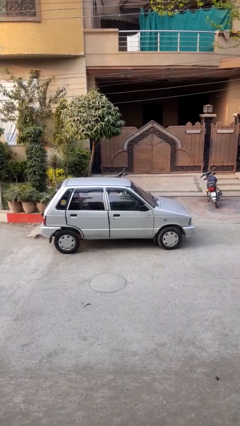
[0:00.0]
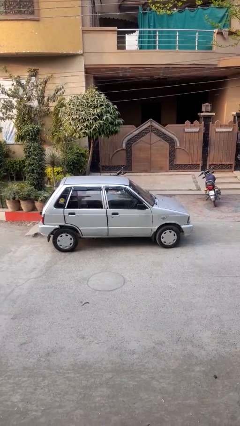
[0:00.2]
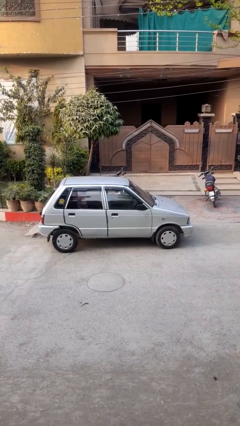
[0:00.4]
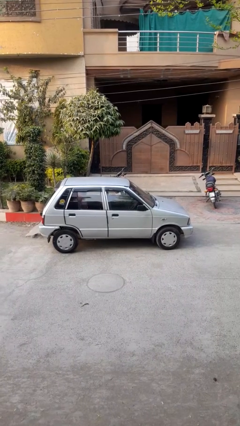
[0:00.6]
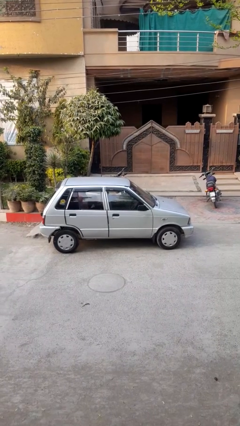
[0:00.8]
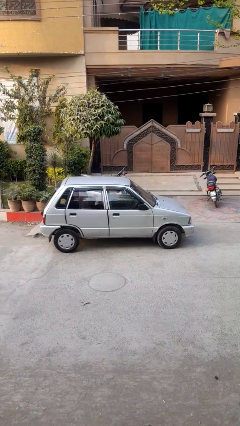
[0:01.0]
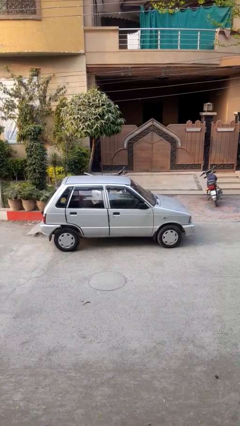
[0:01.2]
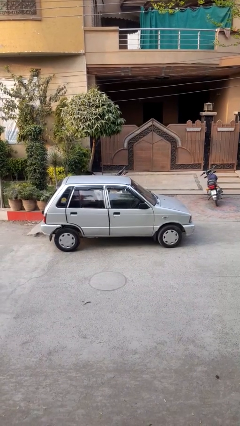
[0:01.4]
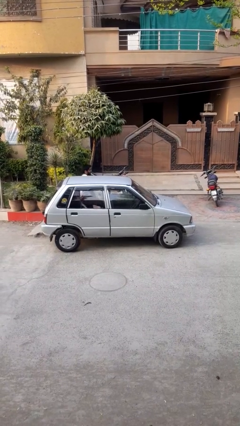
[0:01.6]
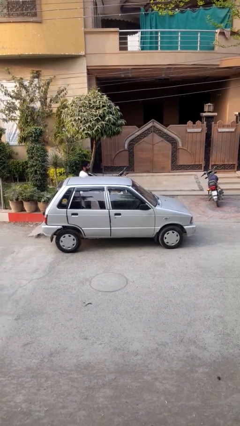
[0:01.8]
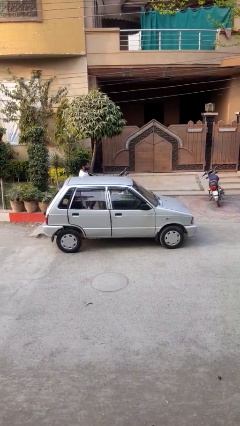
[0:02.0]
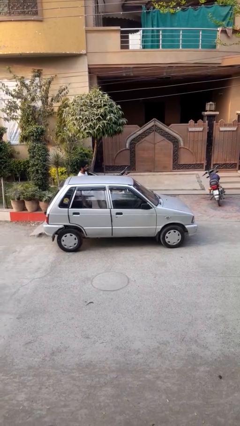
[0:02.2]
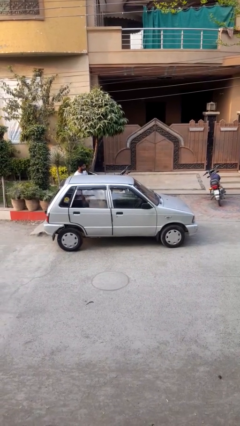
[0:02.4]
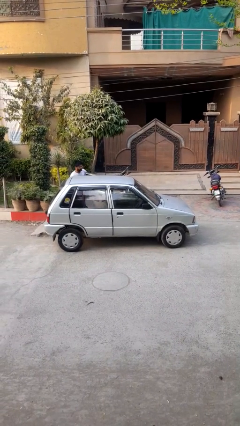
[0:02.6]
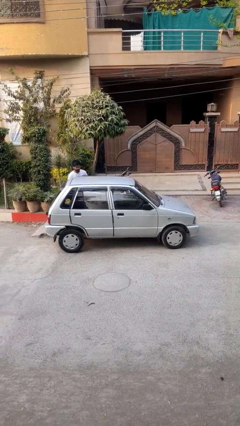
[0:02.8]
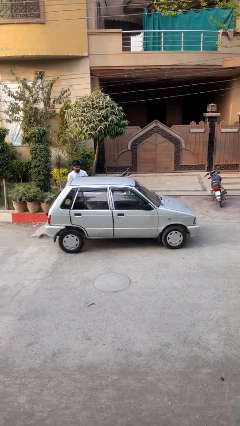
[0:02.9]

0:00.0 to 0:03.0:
car drops off person

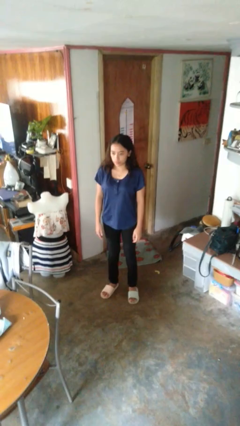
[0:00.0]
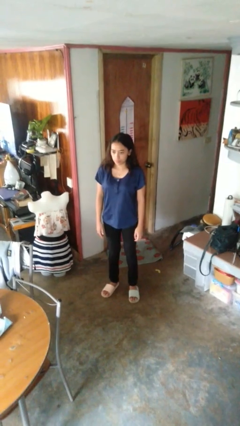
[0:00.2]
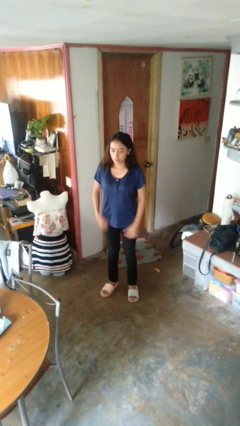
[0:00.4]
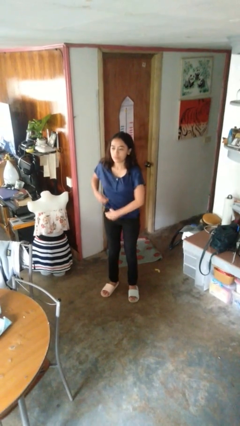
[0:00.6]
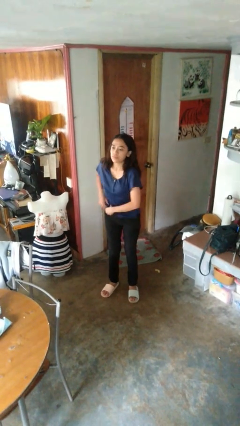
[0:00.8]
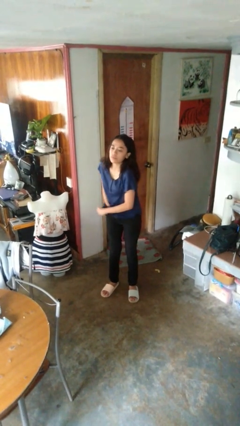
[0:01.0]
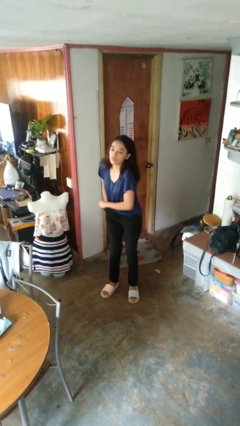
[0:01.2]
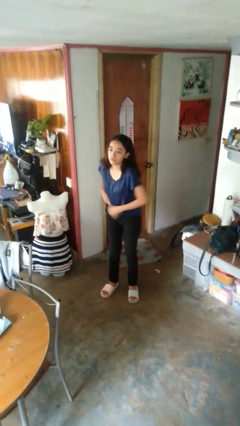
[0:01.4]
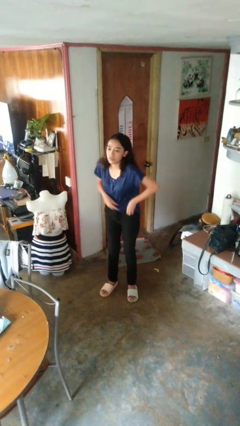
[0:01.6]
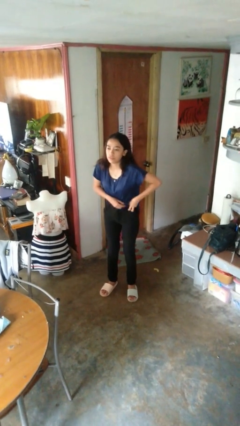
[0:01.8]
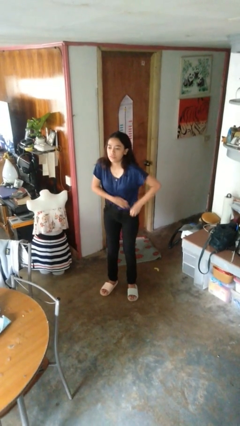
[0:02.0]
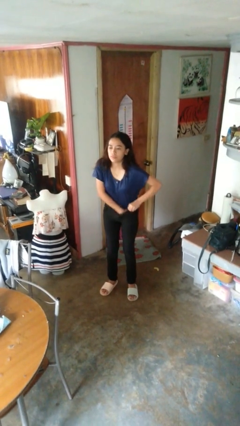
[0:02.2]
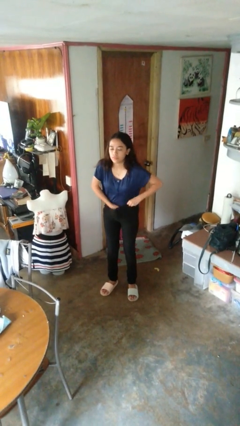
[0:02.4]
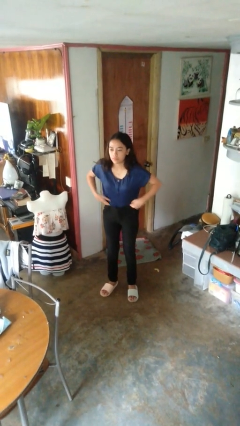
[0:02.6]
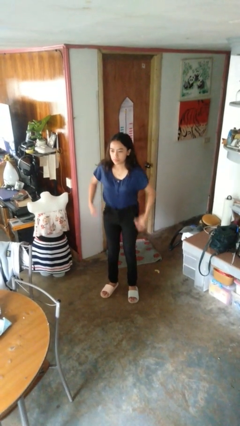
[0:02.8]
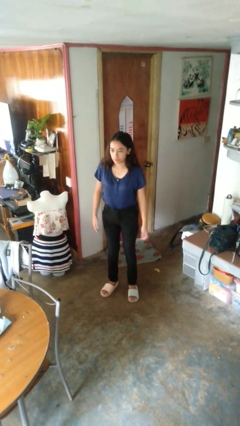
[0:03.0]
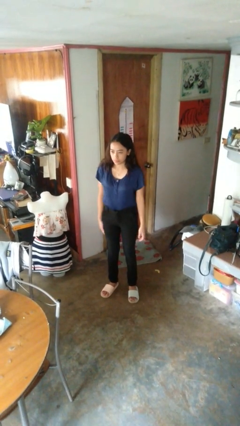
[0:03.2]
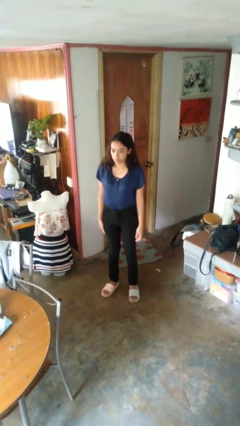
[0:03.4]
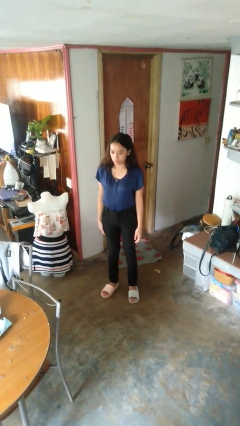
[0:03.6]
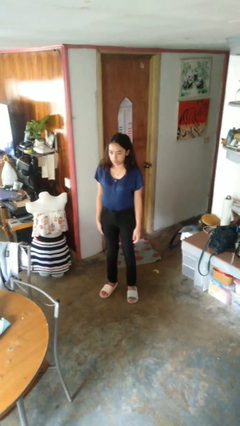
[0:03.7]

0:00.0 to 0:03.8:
person tucks in shirt

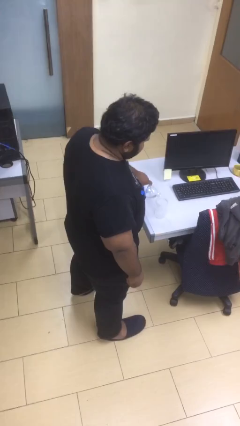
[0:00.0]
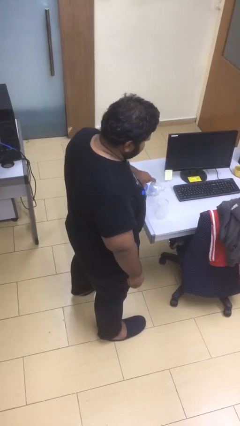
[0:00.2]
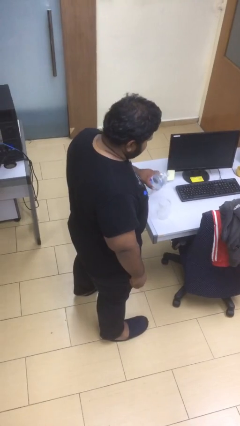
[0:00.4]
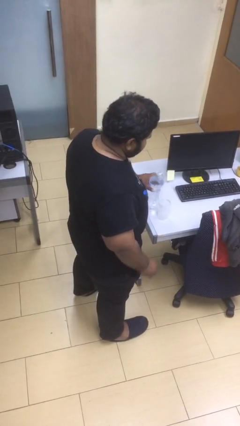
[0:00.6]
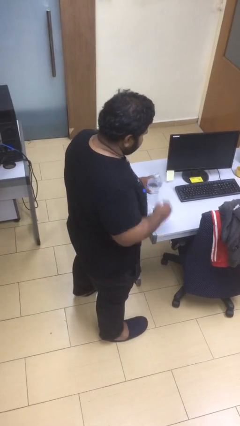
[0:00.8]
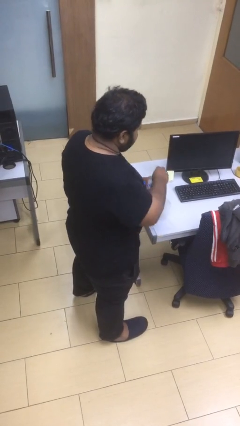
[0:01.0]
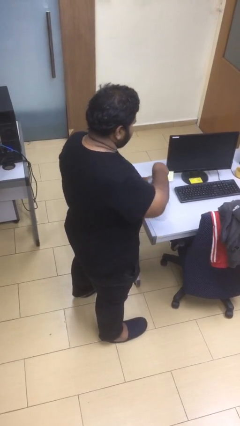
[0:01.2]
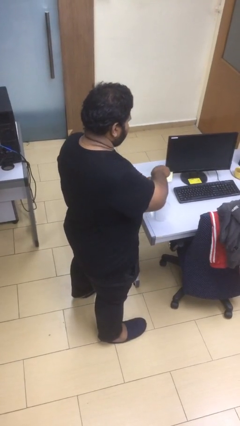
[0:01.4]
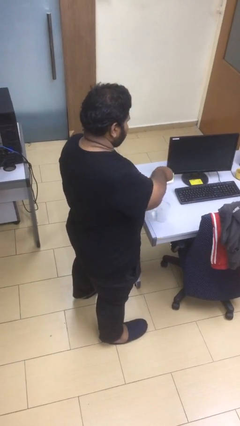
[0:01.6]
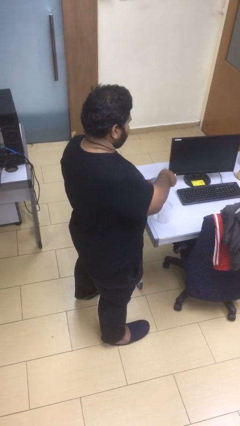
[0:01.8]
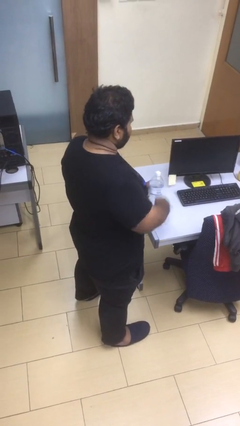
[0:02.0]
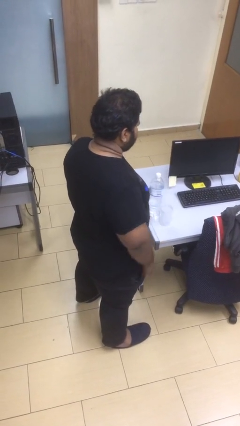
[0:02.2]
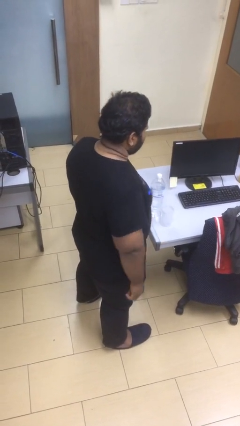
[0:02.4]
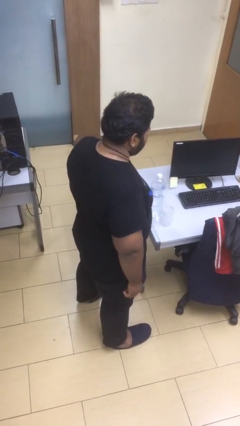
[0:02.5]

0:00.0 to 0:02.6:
person screws lid to bottle

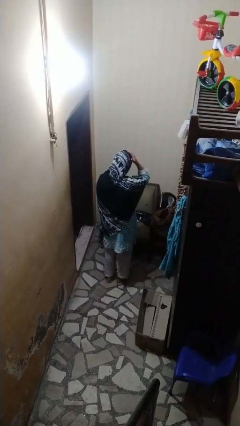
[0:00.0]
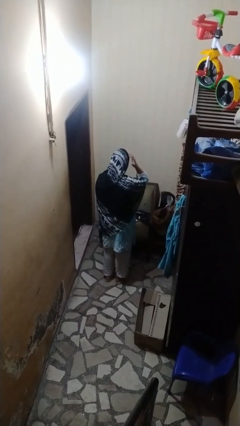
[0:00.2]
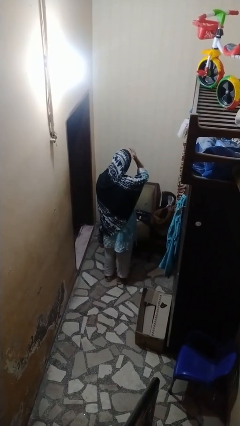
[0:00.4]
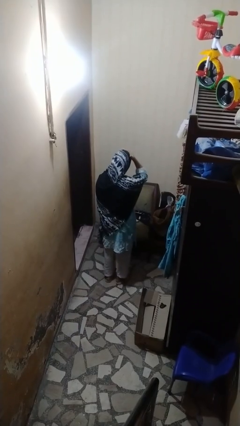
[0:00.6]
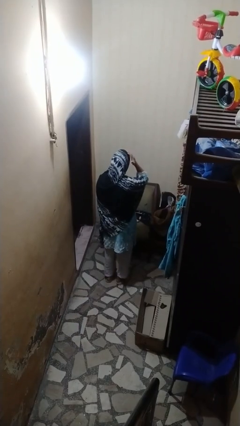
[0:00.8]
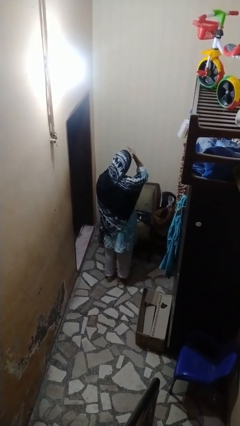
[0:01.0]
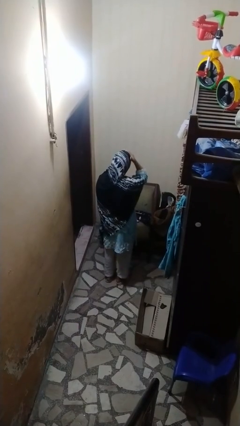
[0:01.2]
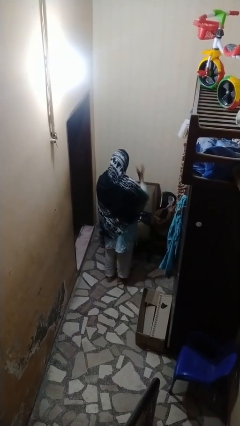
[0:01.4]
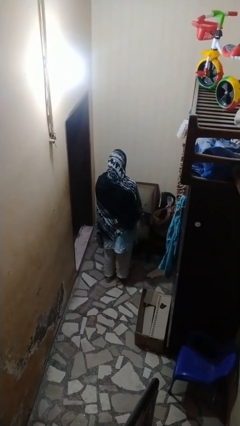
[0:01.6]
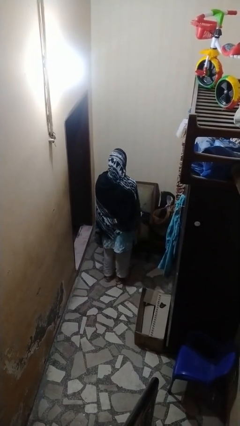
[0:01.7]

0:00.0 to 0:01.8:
person pats head

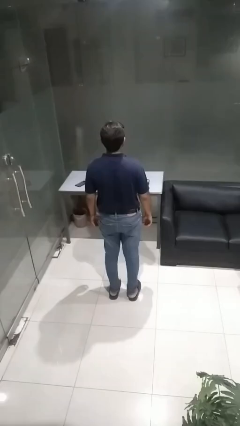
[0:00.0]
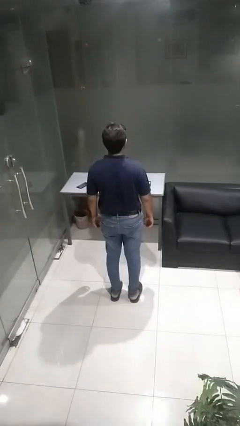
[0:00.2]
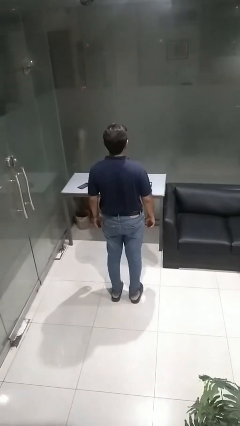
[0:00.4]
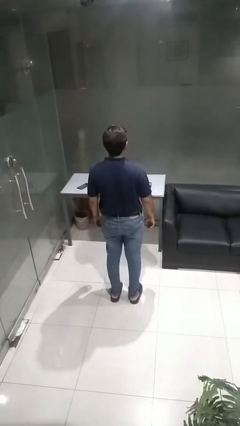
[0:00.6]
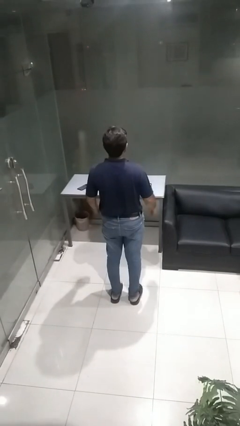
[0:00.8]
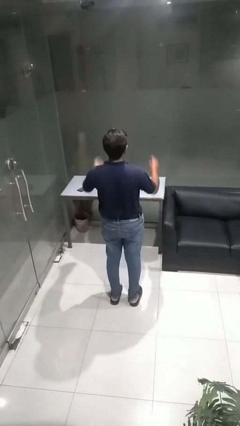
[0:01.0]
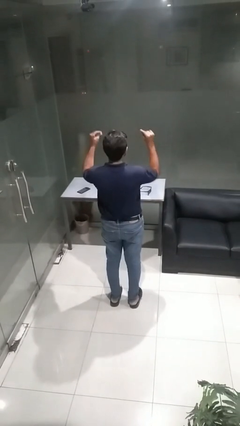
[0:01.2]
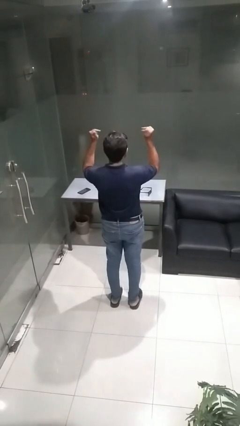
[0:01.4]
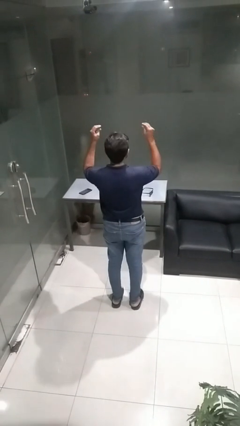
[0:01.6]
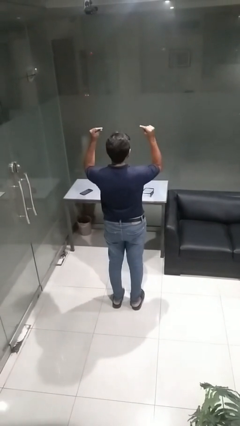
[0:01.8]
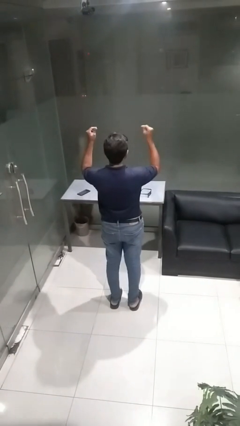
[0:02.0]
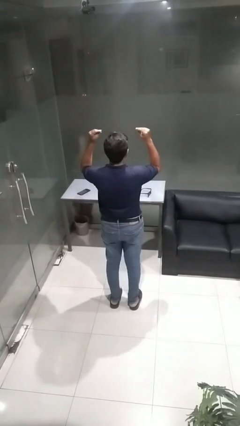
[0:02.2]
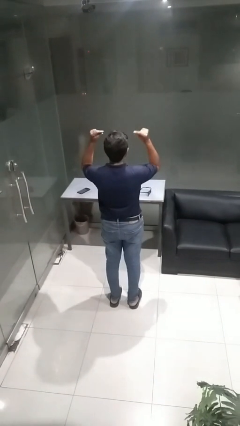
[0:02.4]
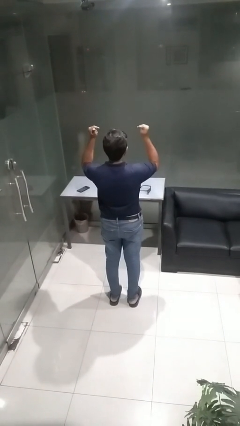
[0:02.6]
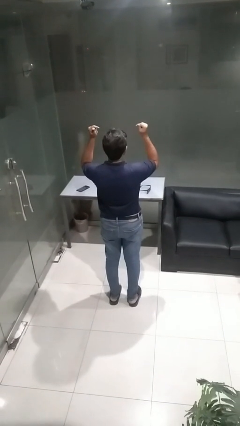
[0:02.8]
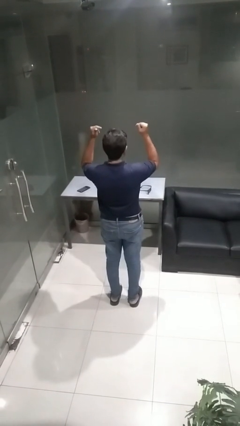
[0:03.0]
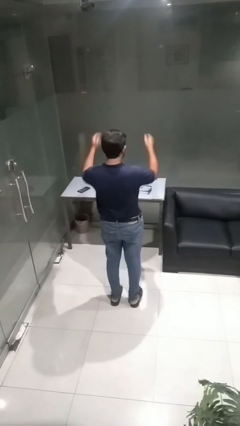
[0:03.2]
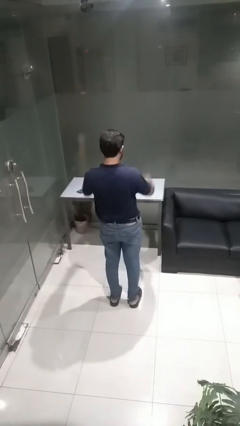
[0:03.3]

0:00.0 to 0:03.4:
person snaps fingers

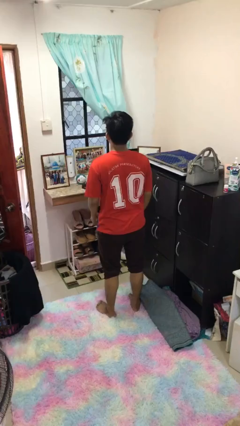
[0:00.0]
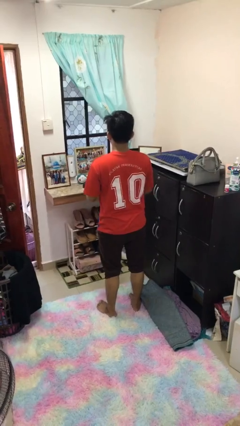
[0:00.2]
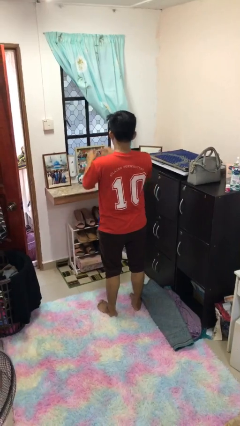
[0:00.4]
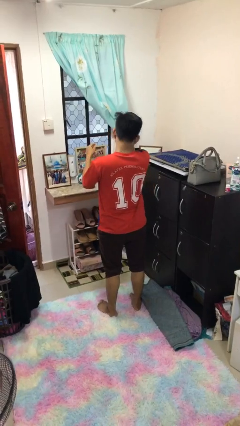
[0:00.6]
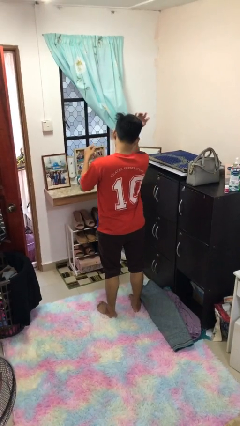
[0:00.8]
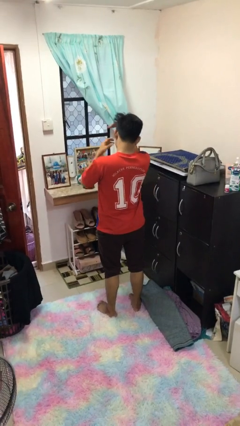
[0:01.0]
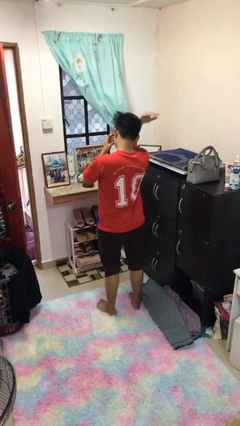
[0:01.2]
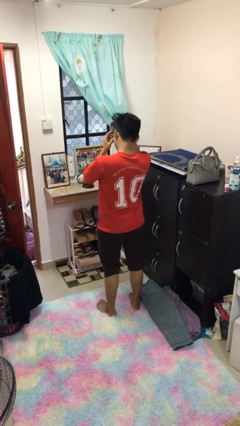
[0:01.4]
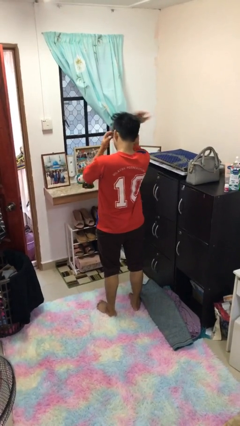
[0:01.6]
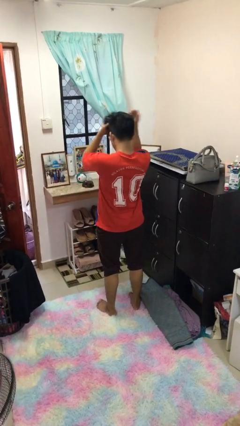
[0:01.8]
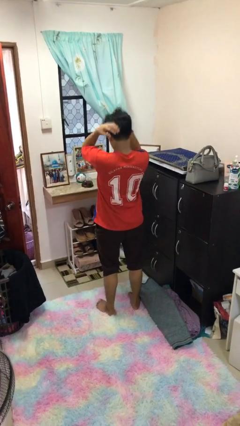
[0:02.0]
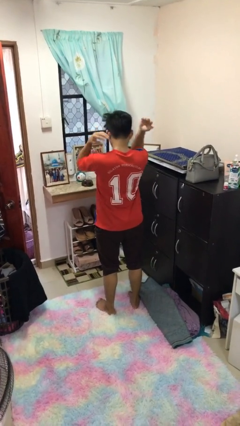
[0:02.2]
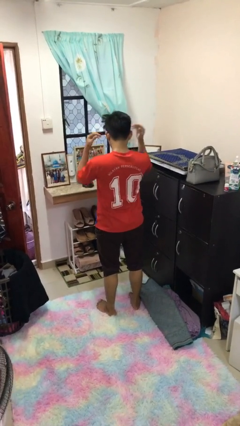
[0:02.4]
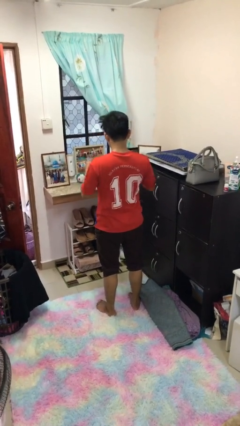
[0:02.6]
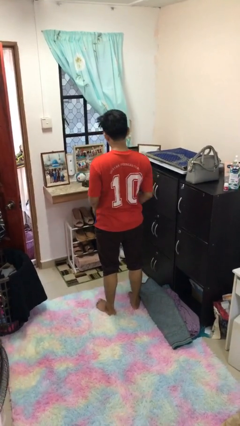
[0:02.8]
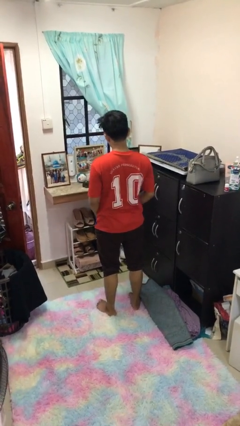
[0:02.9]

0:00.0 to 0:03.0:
person swats bug
